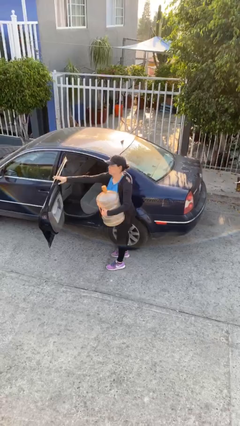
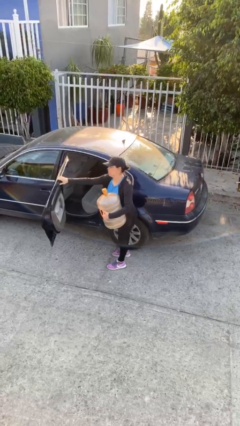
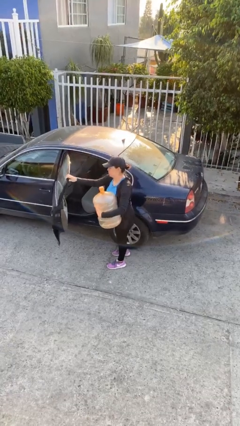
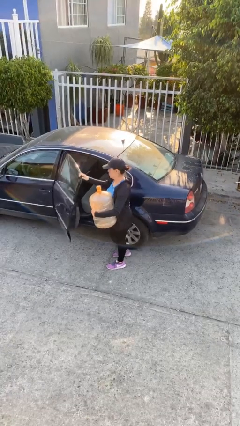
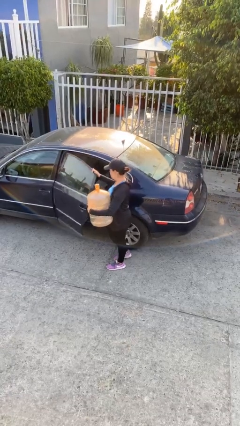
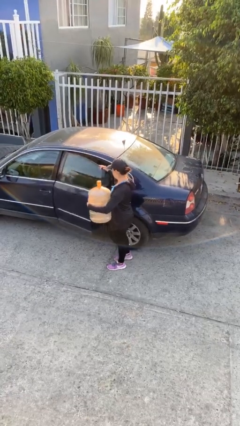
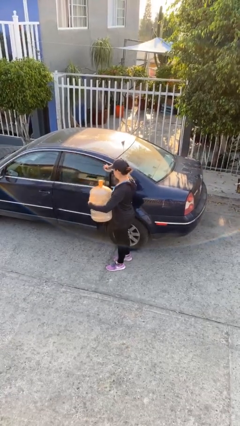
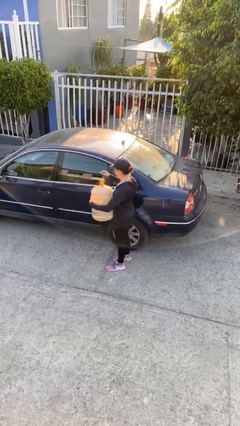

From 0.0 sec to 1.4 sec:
person closes car door

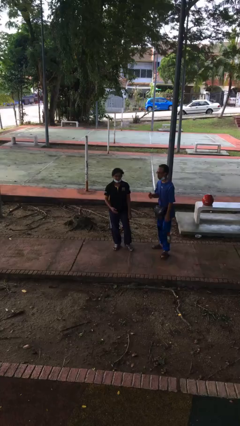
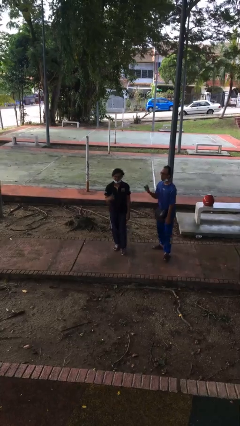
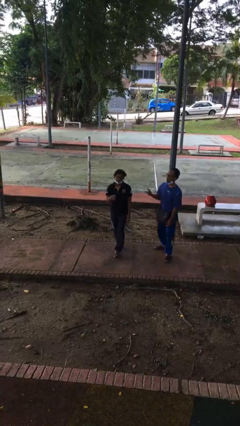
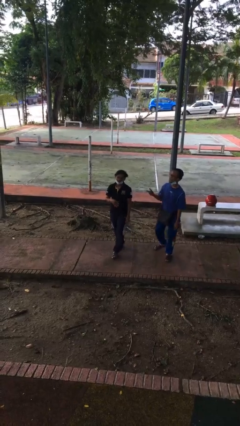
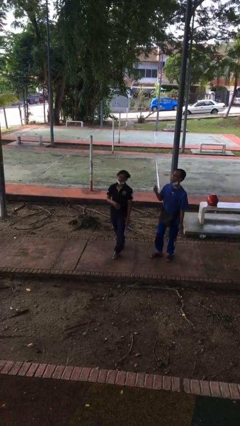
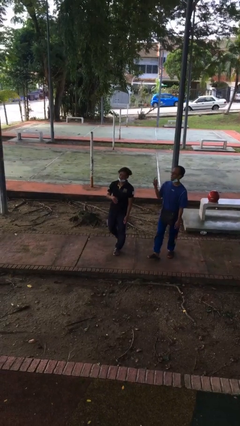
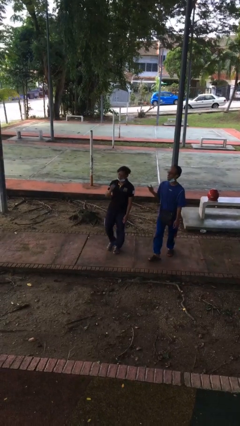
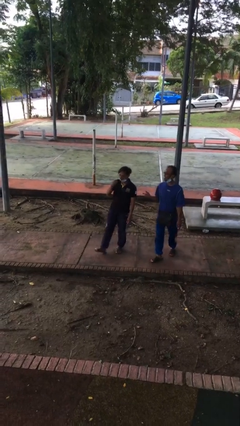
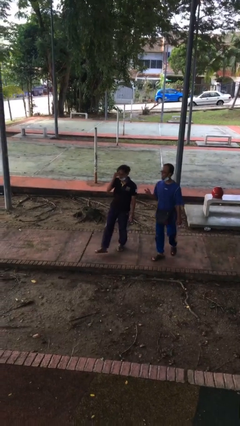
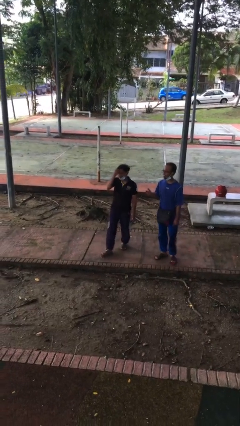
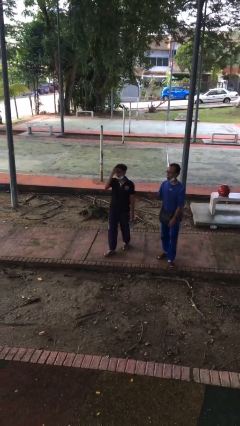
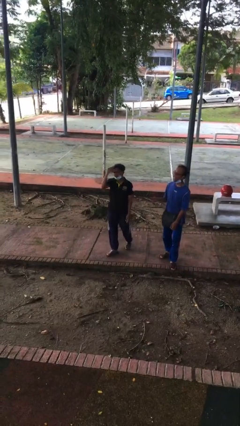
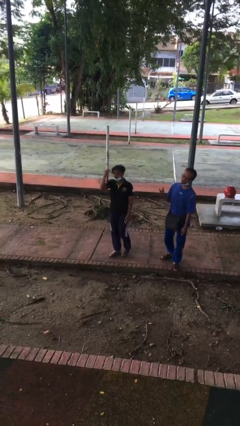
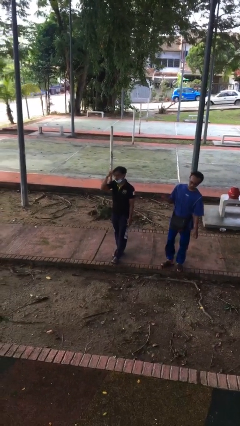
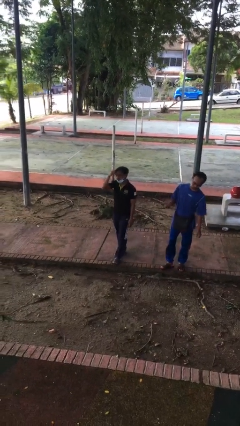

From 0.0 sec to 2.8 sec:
person talks to person

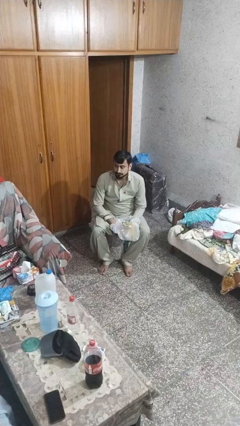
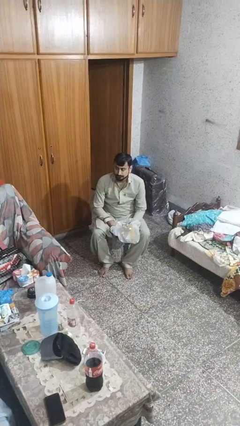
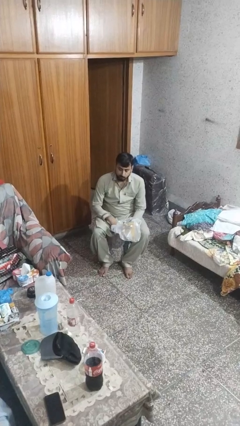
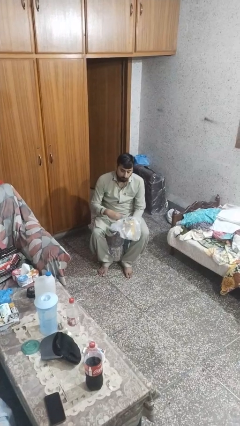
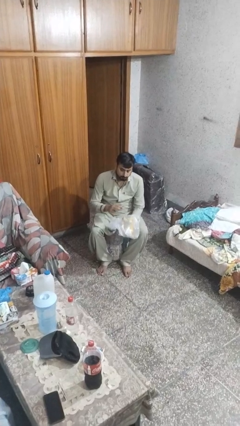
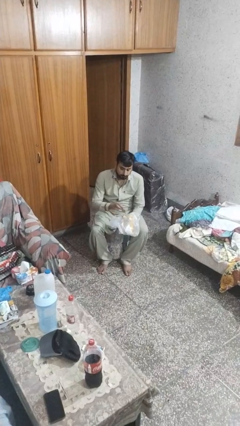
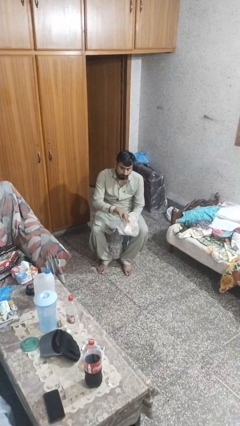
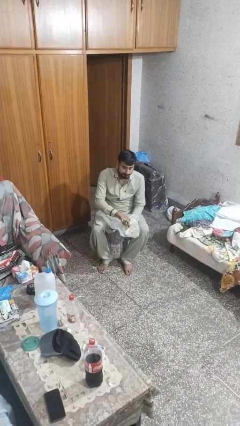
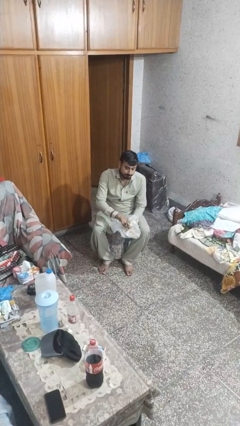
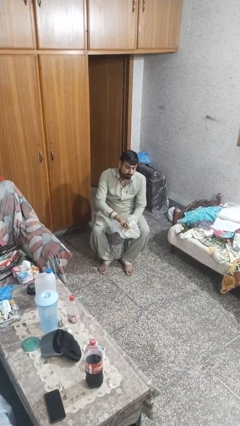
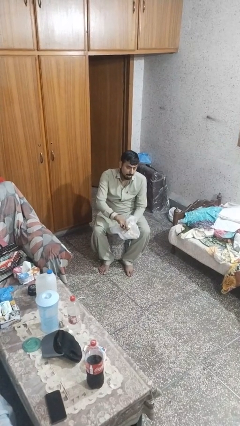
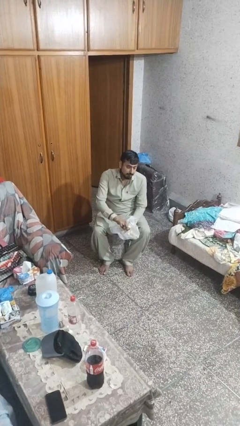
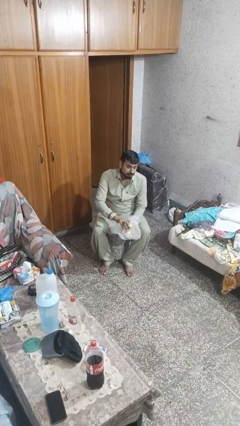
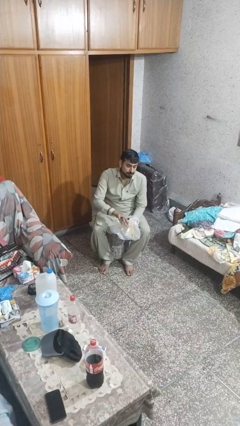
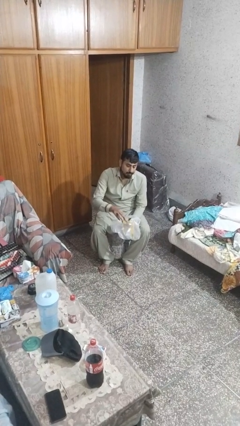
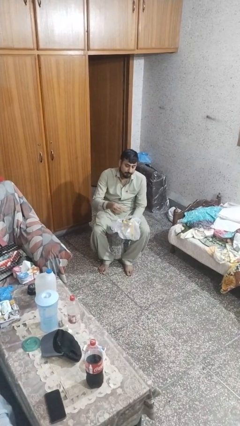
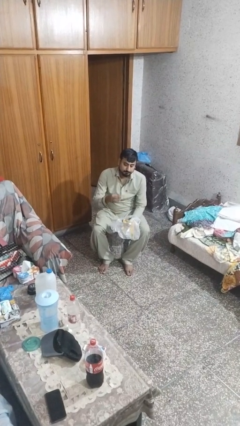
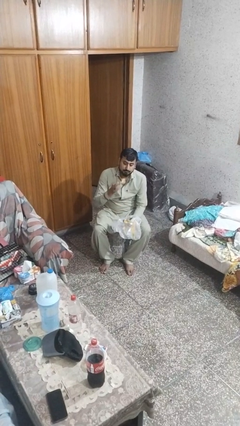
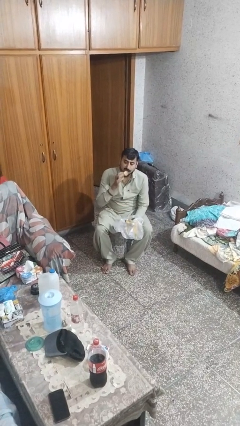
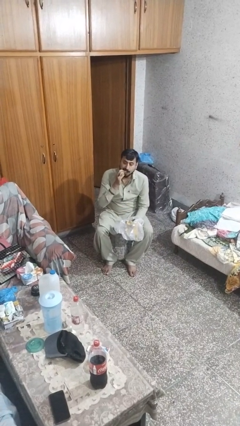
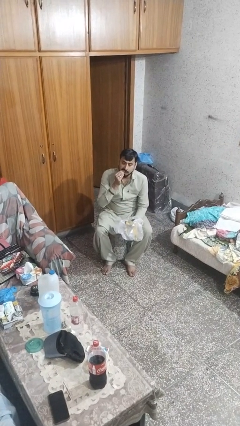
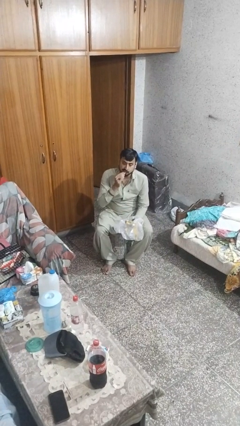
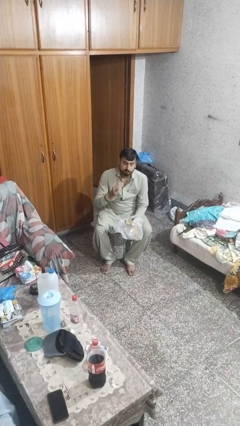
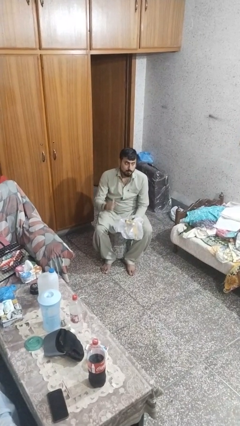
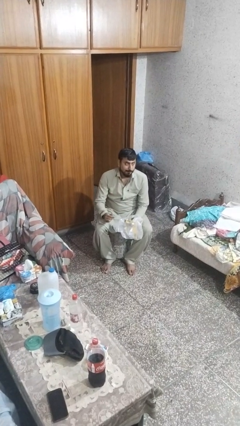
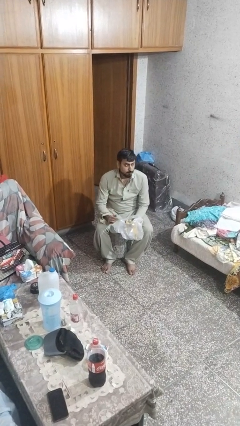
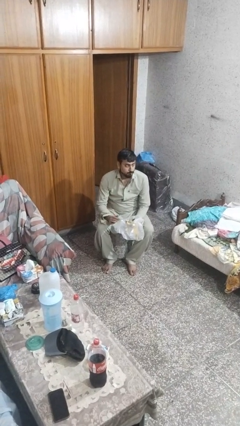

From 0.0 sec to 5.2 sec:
person eats snack from bag

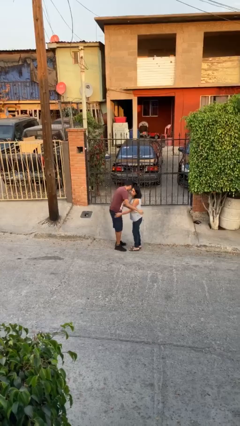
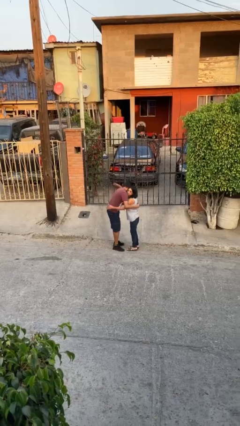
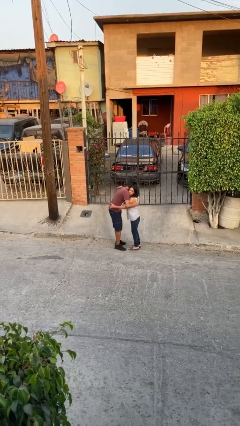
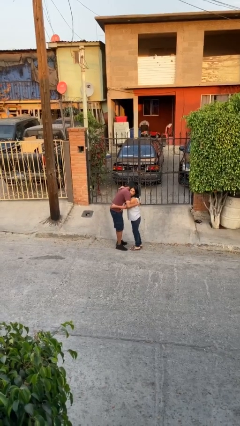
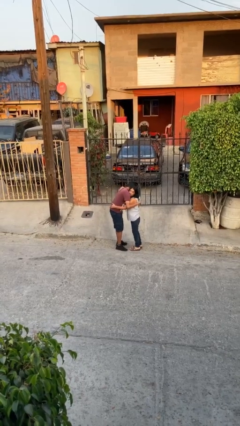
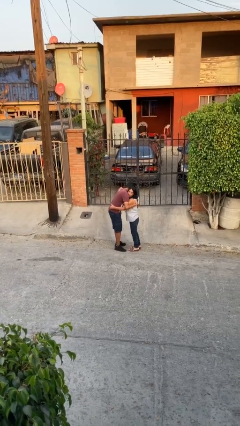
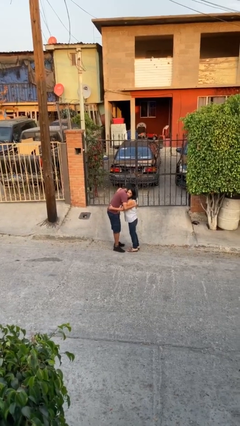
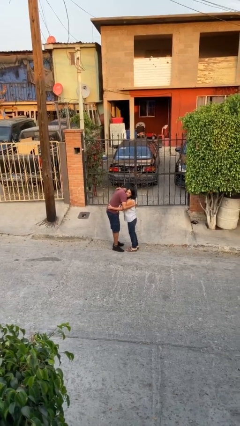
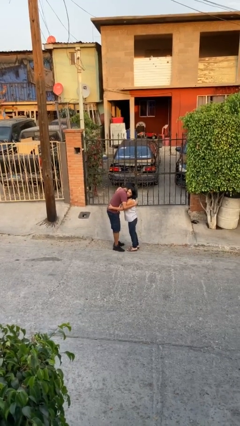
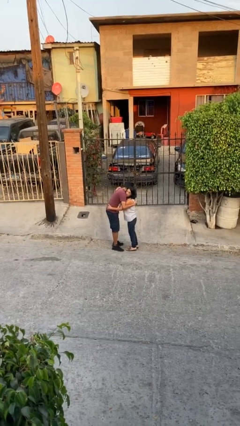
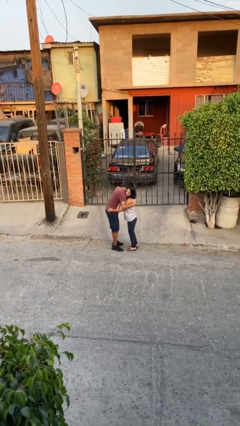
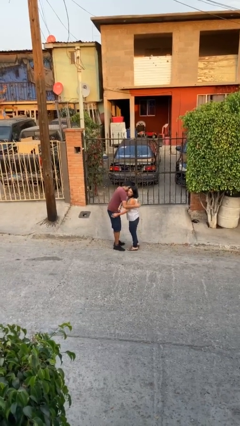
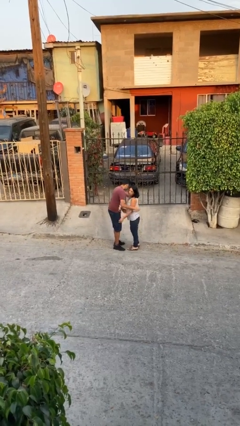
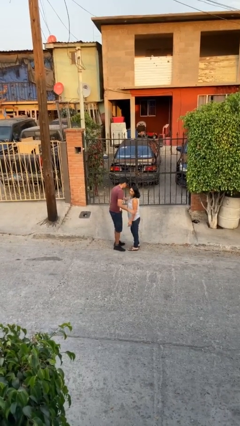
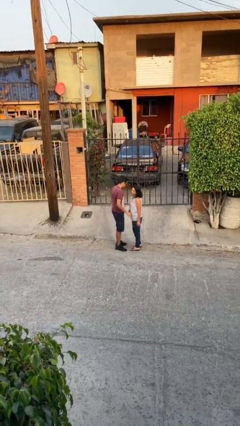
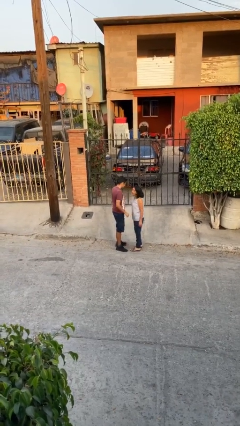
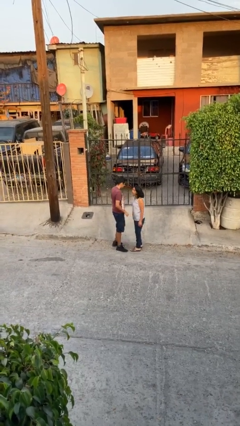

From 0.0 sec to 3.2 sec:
person embraces person

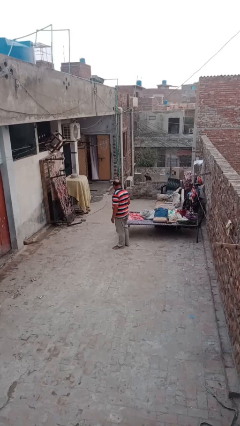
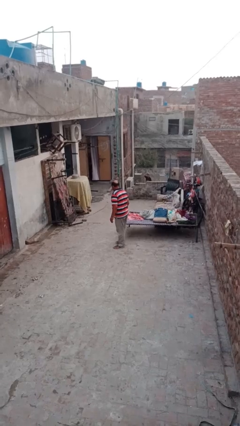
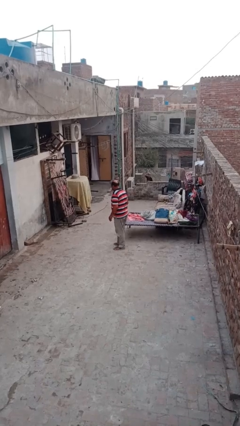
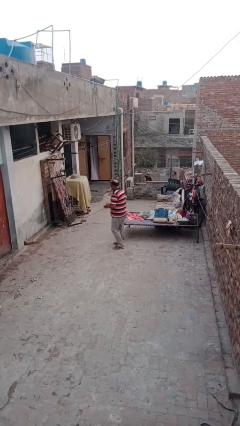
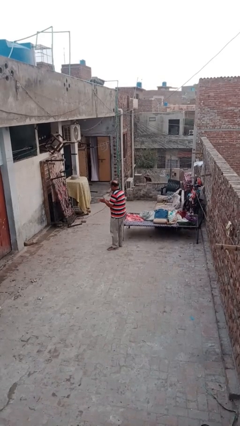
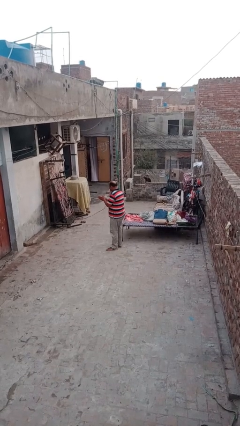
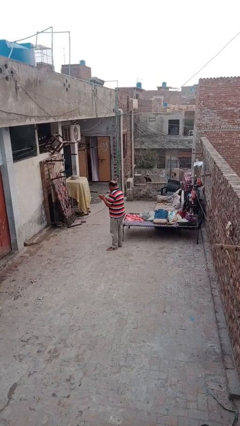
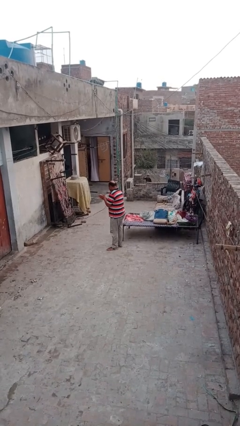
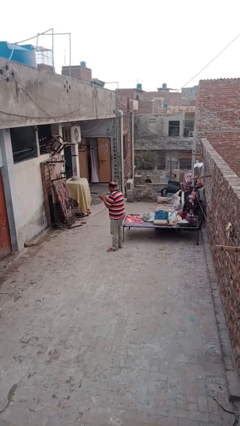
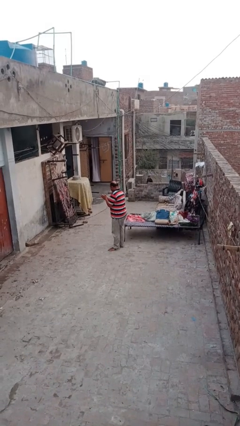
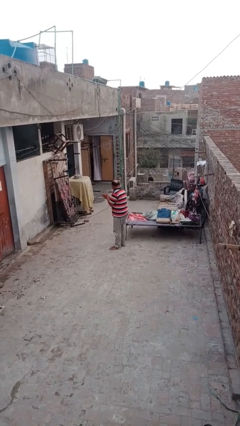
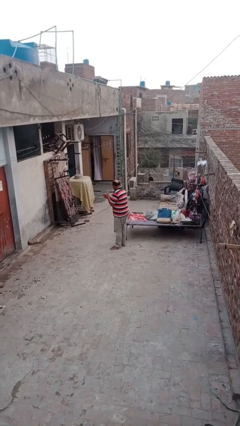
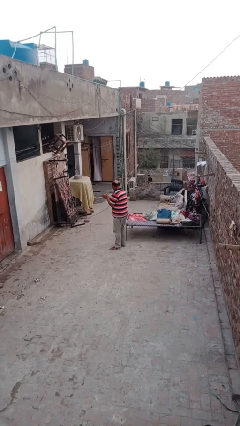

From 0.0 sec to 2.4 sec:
person blows into hands

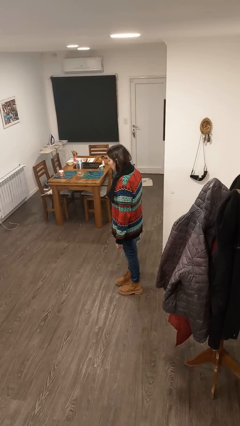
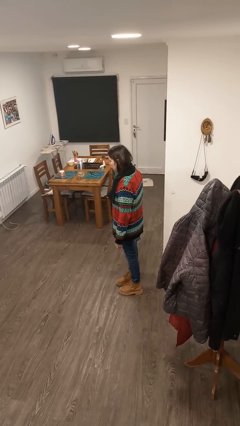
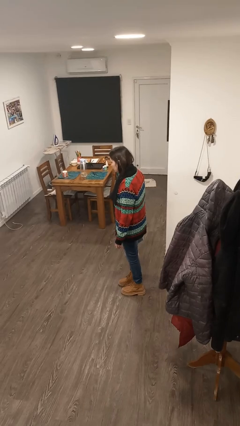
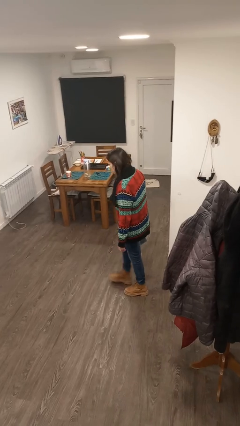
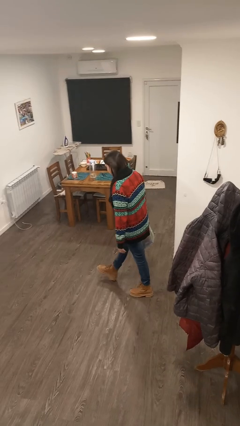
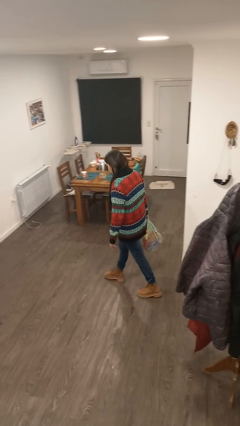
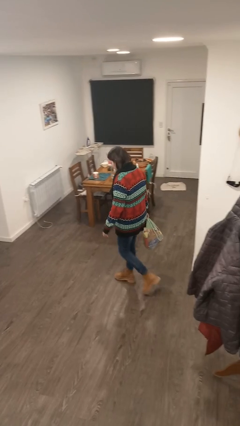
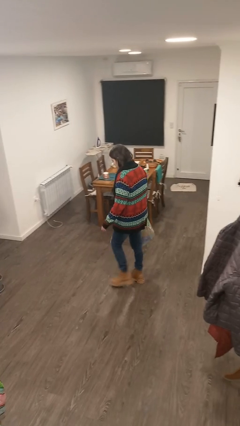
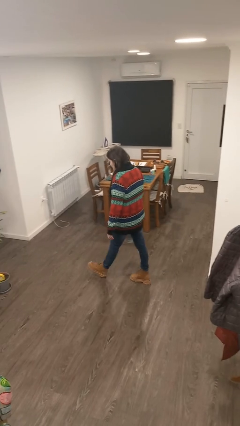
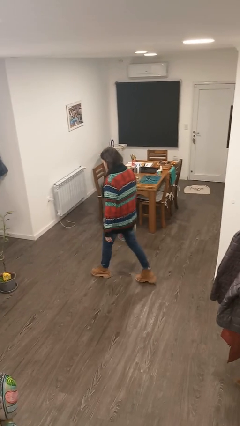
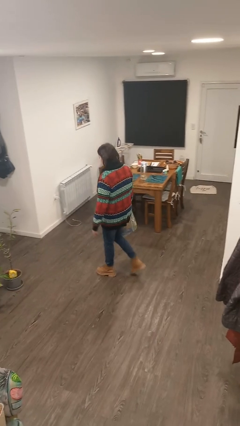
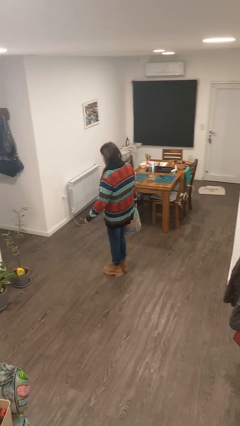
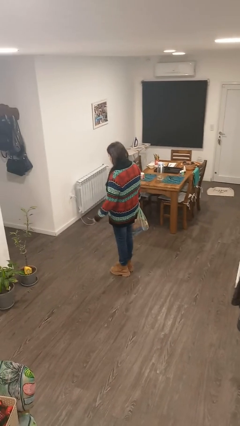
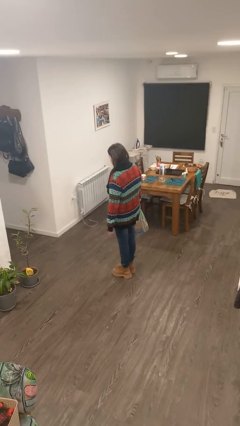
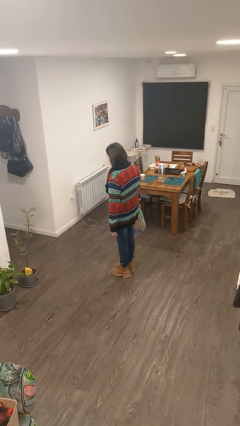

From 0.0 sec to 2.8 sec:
person carries groceries
